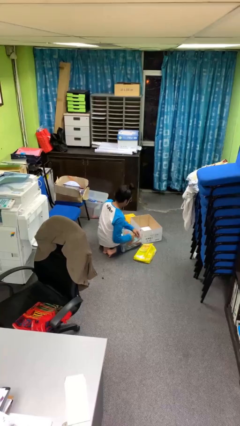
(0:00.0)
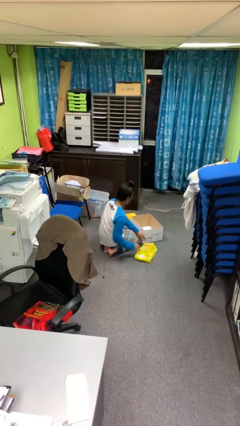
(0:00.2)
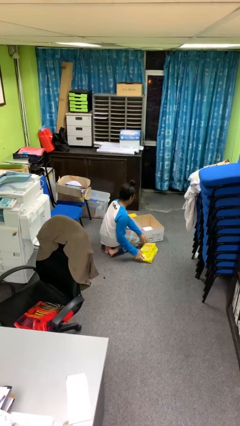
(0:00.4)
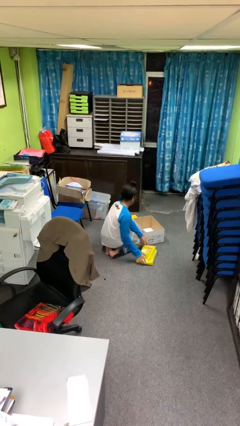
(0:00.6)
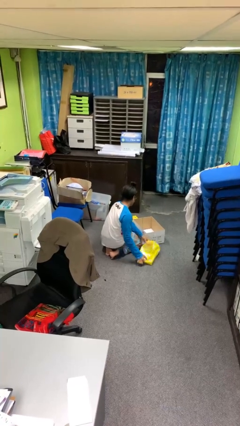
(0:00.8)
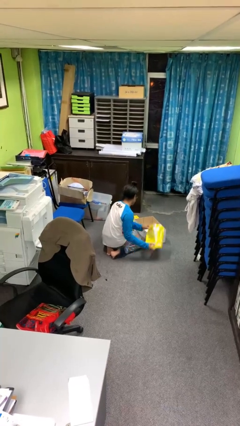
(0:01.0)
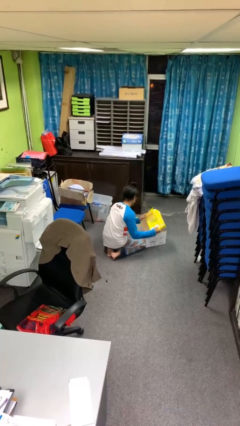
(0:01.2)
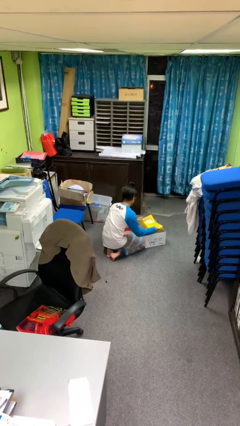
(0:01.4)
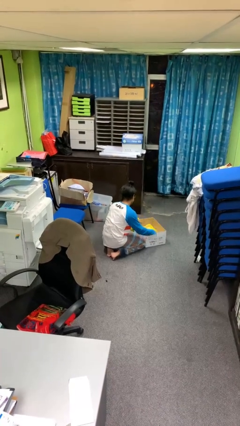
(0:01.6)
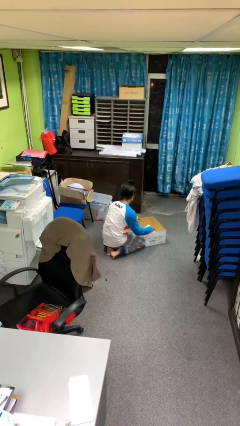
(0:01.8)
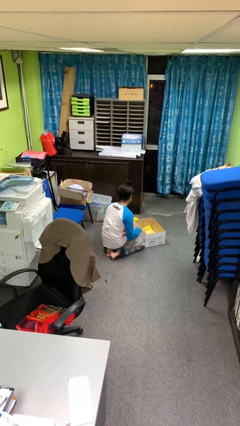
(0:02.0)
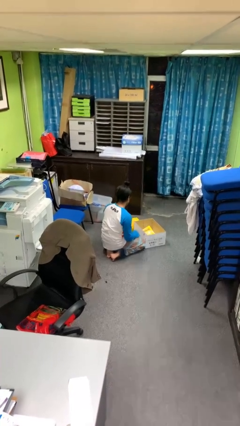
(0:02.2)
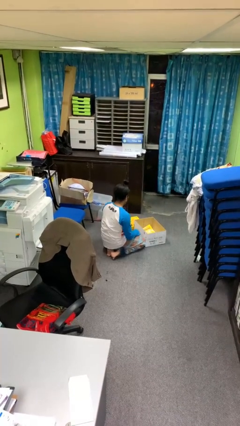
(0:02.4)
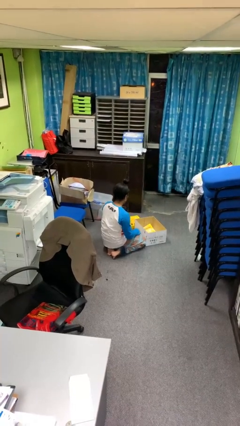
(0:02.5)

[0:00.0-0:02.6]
person puts object into box

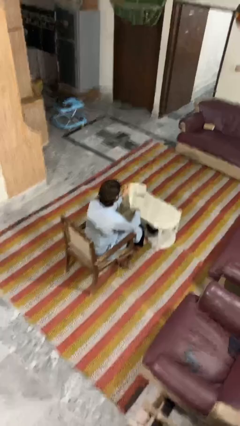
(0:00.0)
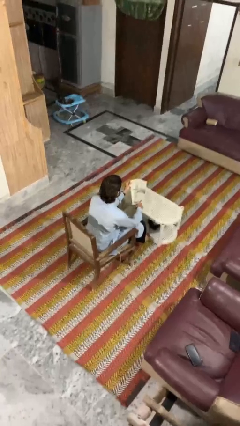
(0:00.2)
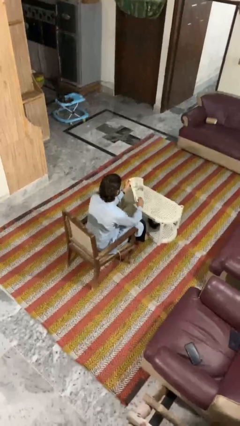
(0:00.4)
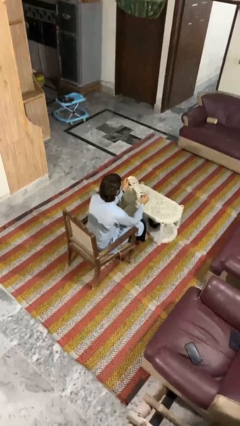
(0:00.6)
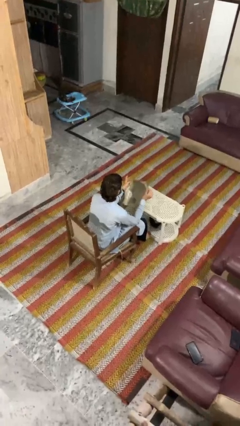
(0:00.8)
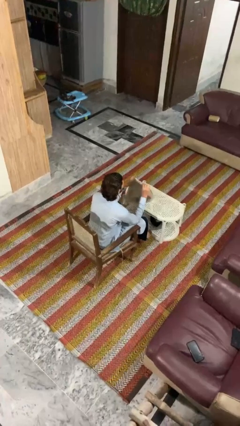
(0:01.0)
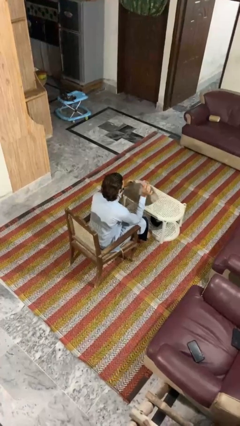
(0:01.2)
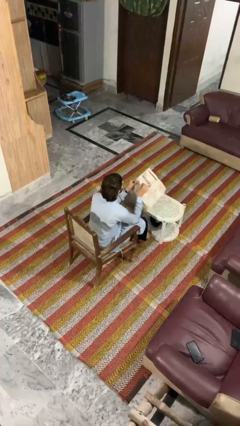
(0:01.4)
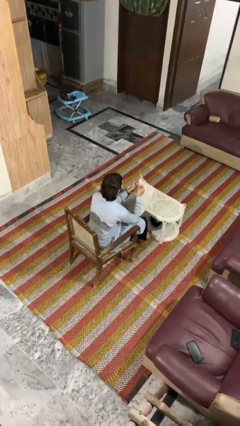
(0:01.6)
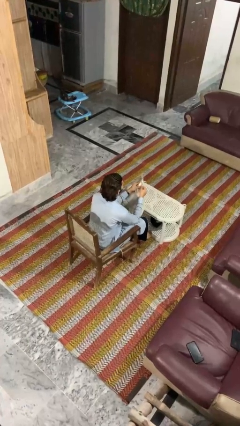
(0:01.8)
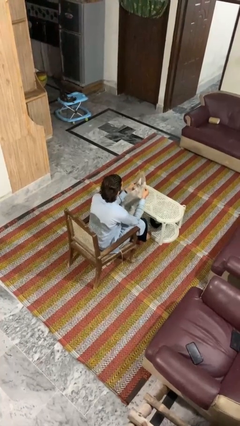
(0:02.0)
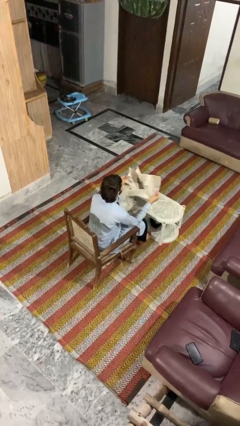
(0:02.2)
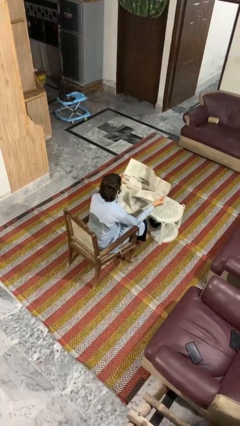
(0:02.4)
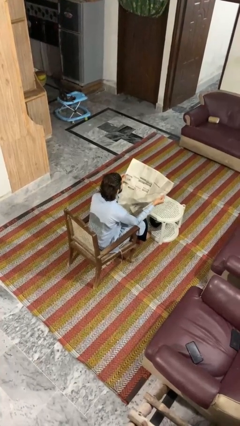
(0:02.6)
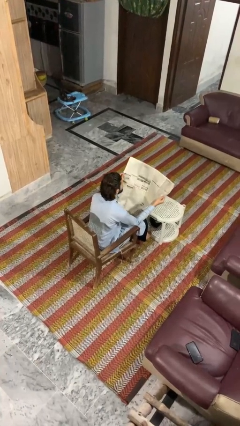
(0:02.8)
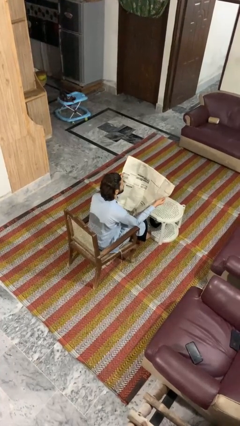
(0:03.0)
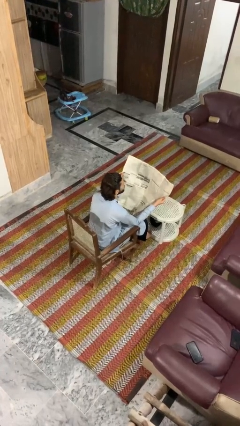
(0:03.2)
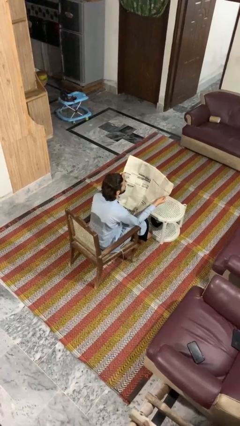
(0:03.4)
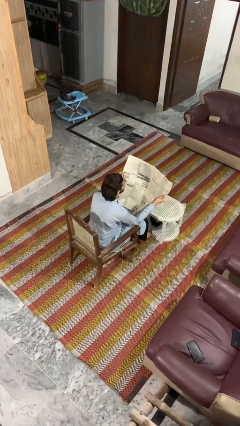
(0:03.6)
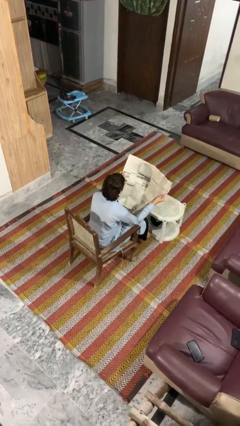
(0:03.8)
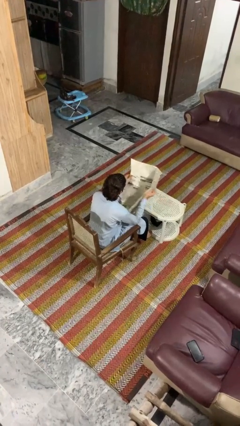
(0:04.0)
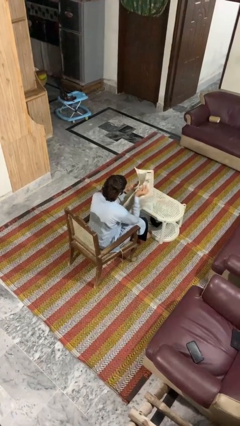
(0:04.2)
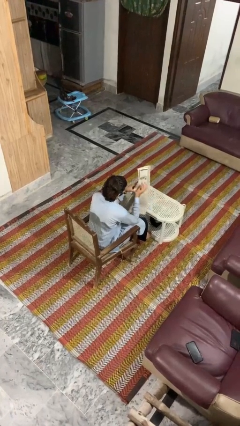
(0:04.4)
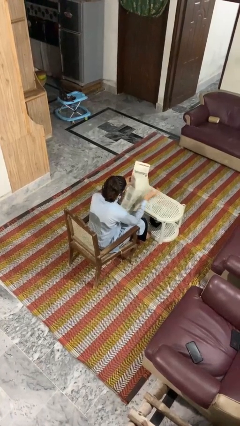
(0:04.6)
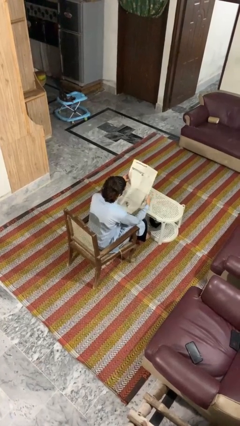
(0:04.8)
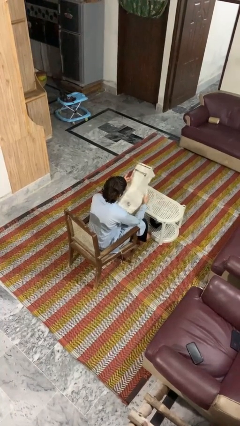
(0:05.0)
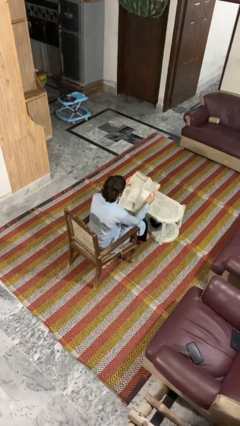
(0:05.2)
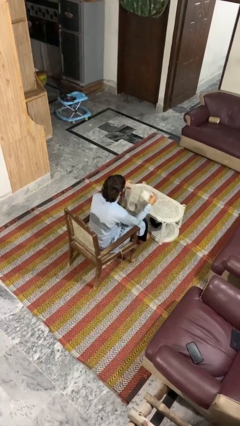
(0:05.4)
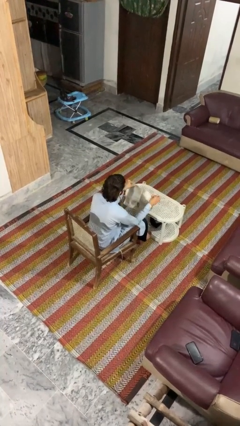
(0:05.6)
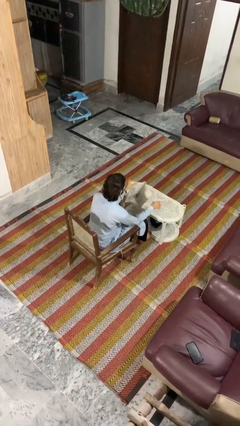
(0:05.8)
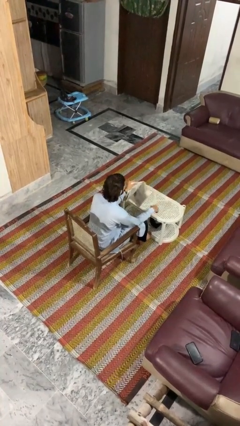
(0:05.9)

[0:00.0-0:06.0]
person reads newspaper

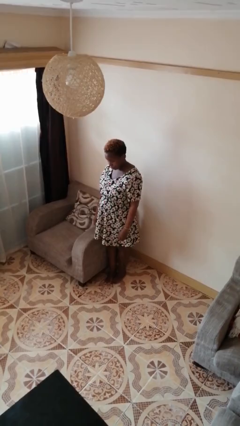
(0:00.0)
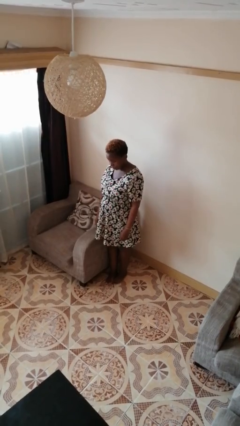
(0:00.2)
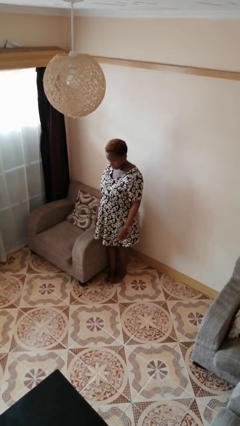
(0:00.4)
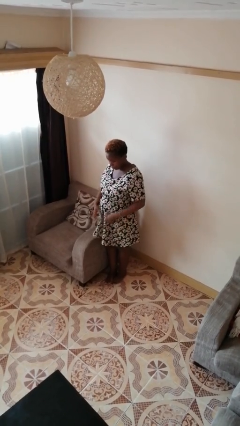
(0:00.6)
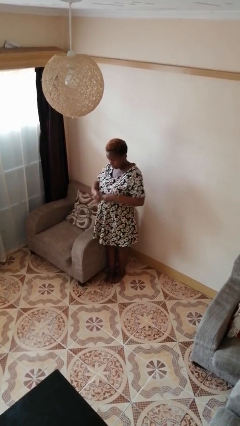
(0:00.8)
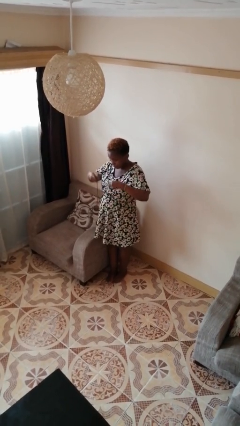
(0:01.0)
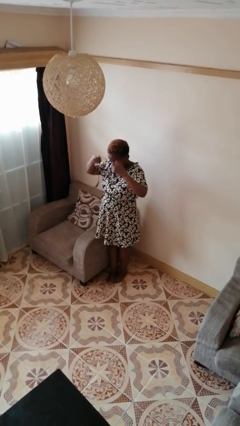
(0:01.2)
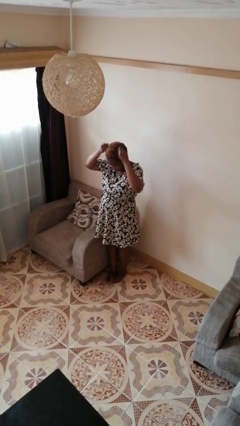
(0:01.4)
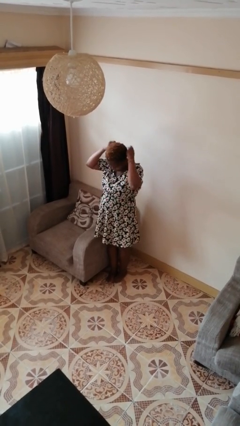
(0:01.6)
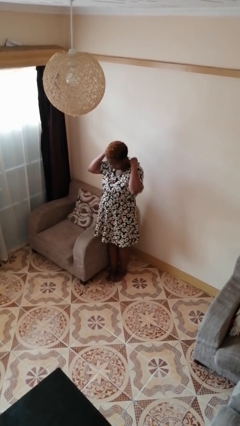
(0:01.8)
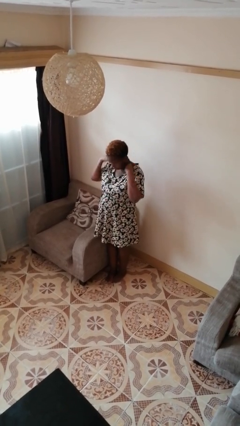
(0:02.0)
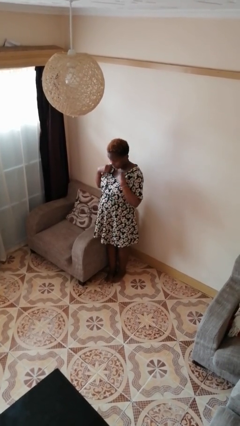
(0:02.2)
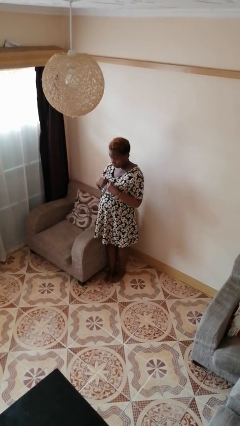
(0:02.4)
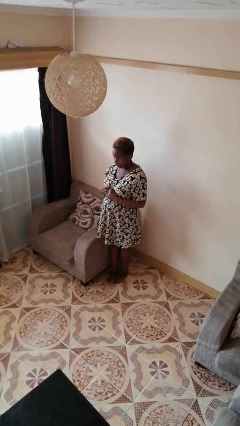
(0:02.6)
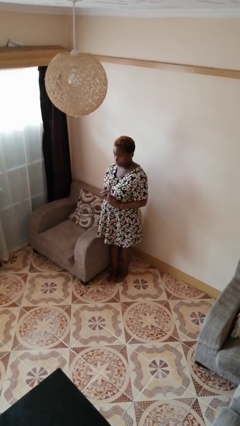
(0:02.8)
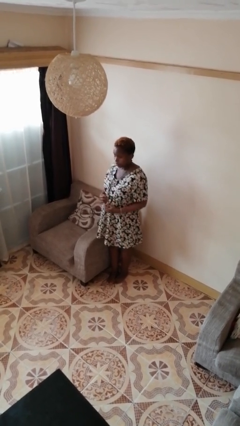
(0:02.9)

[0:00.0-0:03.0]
person puts on necklace

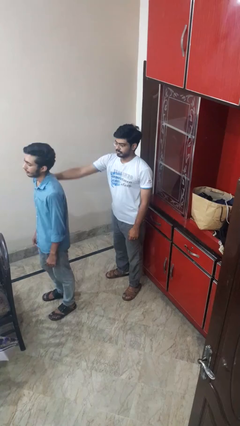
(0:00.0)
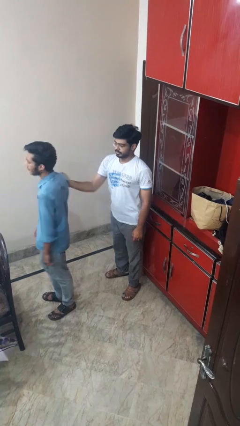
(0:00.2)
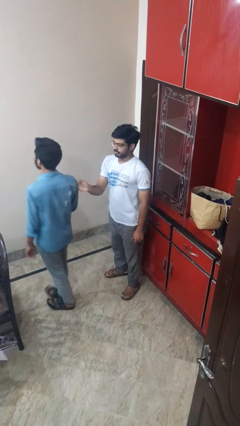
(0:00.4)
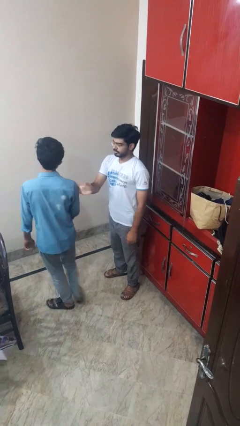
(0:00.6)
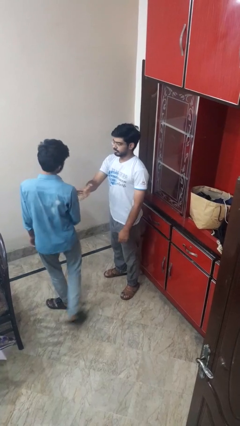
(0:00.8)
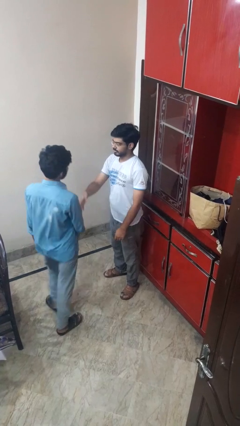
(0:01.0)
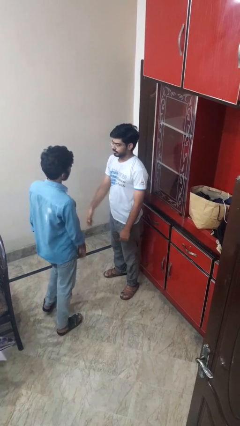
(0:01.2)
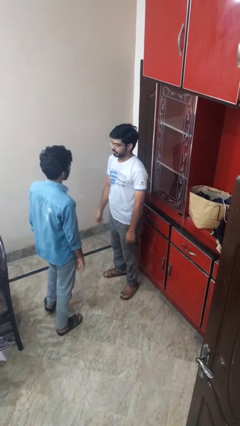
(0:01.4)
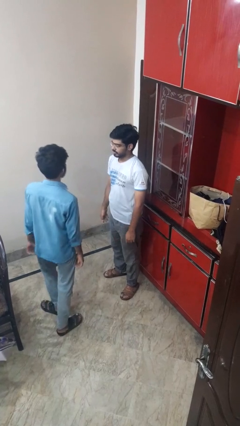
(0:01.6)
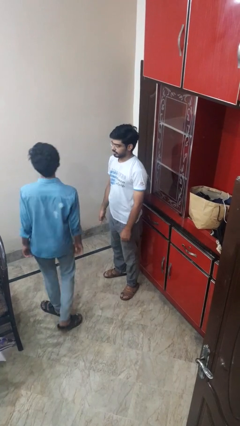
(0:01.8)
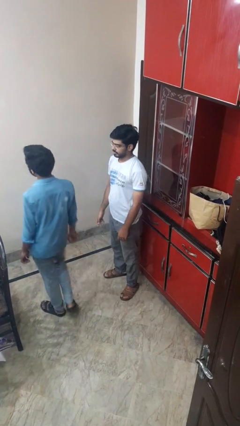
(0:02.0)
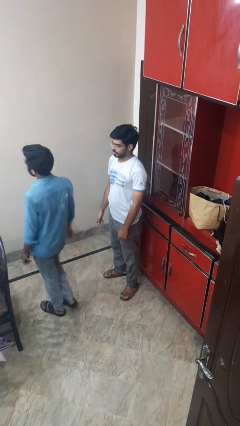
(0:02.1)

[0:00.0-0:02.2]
person spins person around

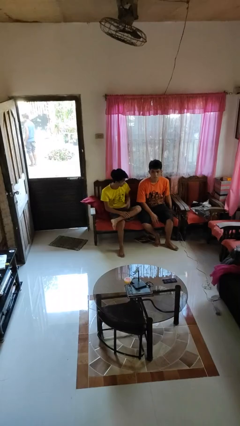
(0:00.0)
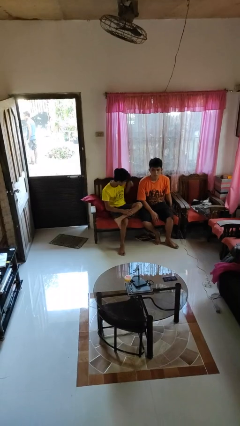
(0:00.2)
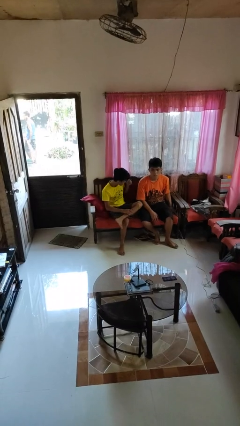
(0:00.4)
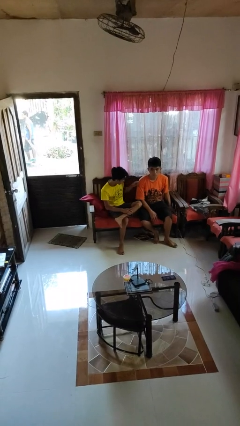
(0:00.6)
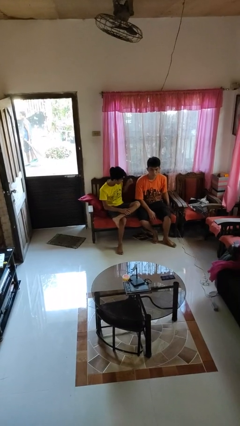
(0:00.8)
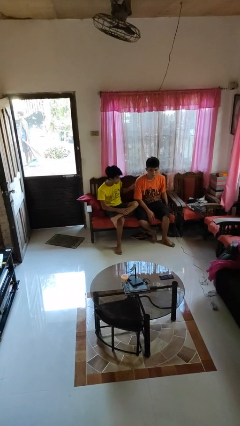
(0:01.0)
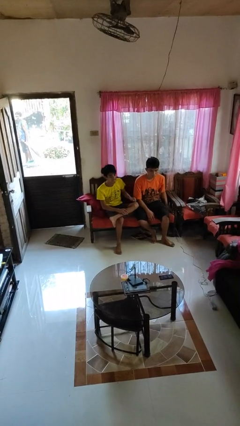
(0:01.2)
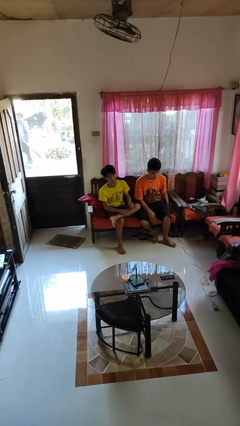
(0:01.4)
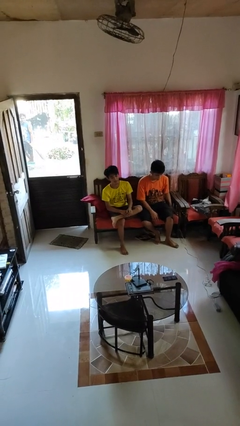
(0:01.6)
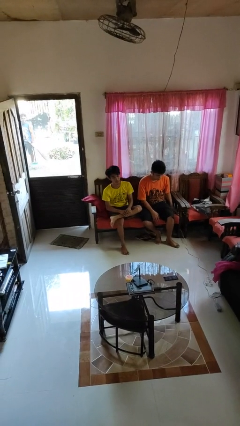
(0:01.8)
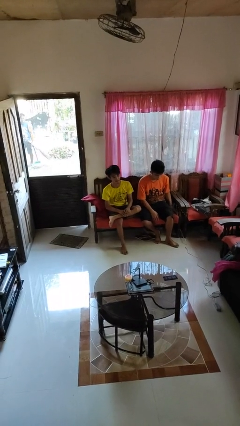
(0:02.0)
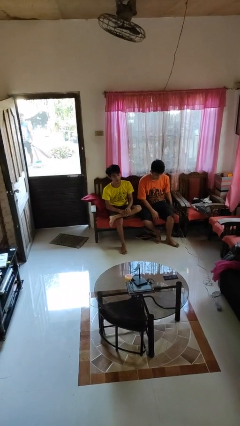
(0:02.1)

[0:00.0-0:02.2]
person pounds shoulders of person

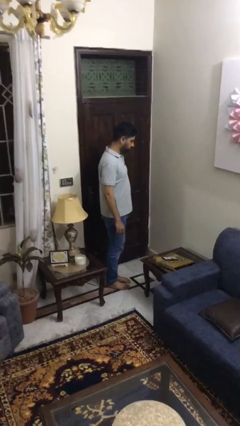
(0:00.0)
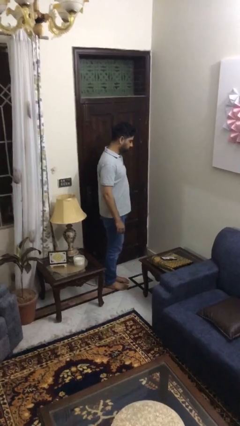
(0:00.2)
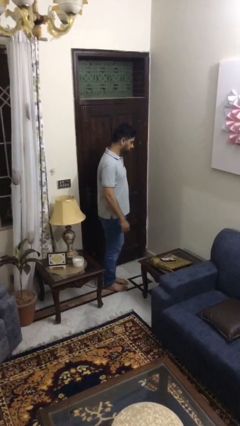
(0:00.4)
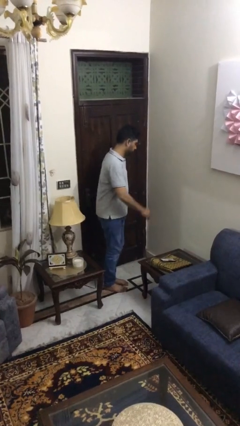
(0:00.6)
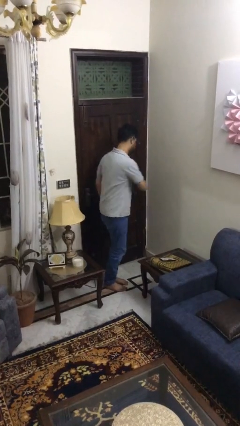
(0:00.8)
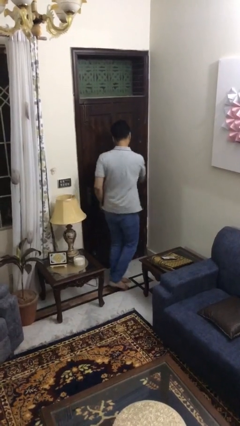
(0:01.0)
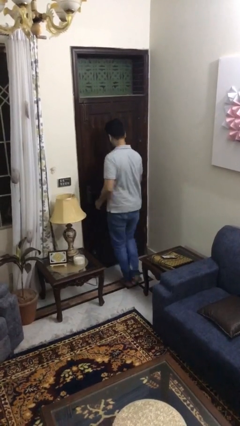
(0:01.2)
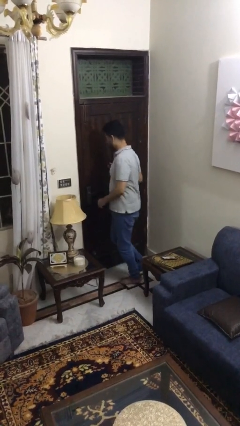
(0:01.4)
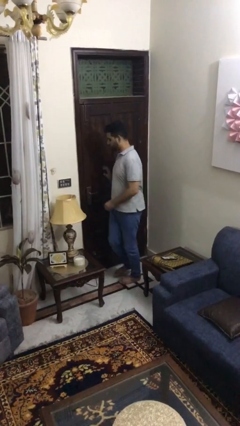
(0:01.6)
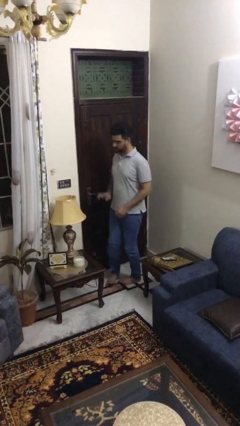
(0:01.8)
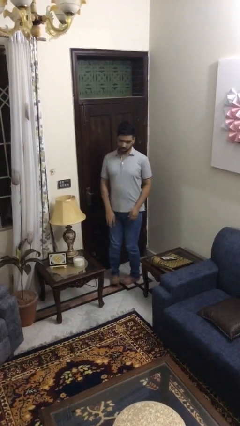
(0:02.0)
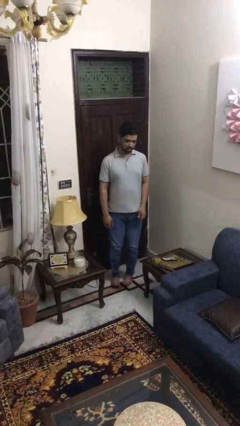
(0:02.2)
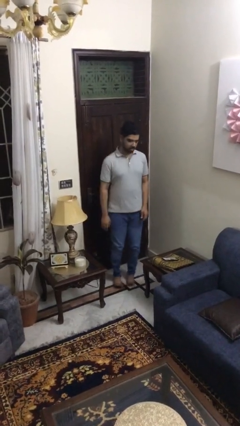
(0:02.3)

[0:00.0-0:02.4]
person twirls
